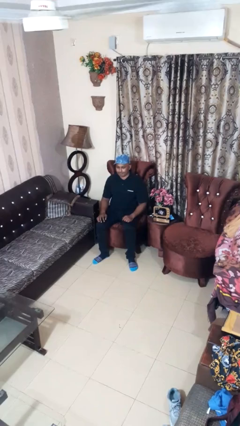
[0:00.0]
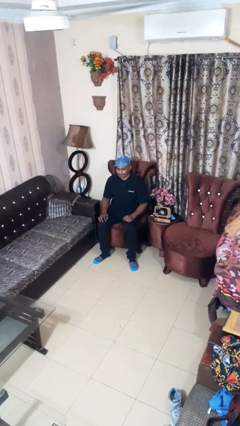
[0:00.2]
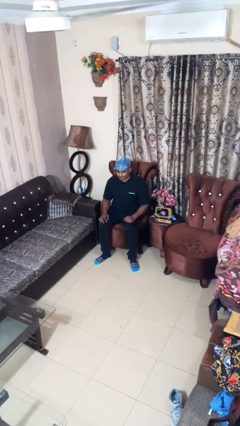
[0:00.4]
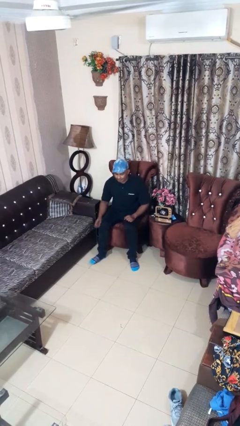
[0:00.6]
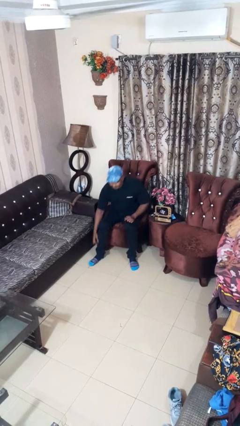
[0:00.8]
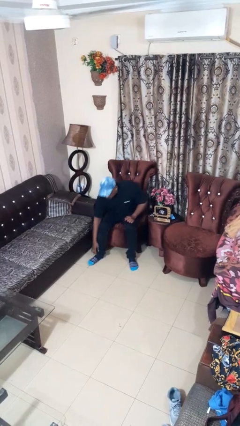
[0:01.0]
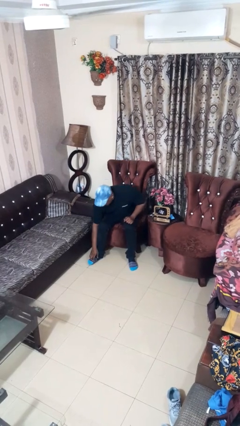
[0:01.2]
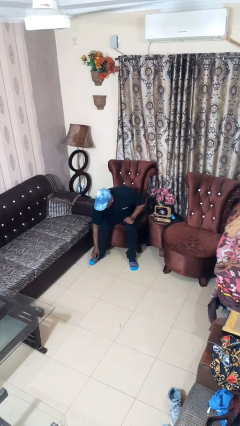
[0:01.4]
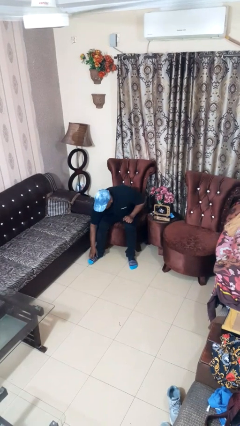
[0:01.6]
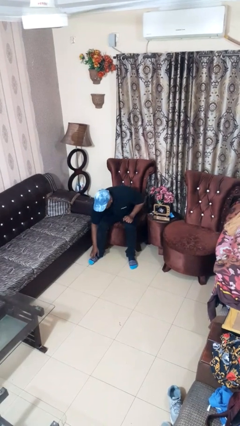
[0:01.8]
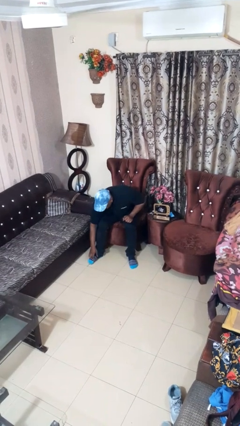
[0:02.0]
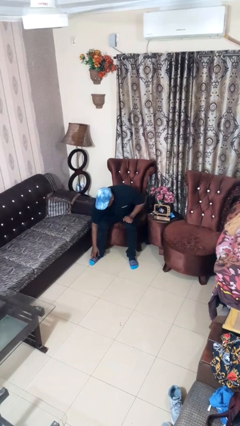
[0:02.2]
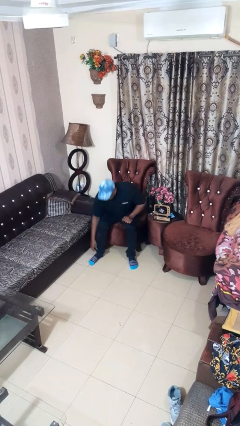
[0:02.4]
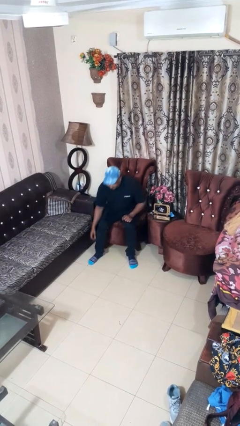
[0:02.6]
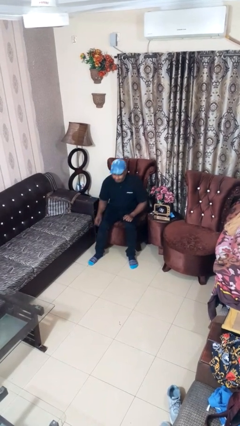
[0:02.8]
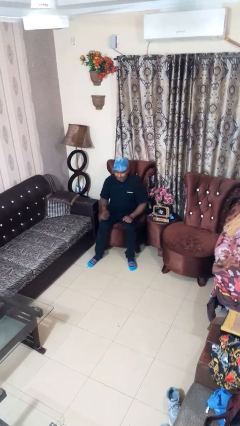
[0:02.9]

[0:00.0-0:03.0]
person rubs foot

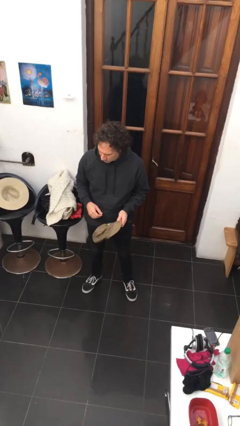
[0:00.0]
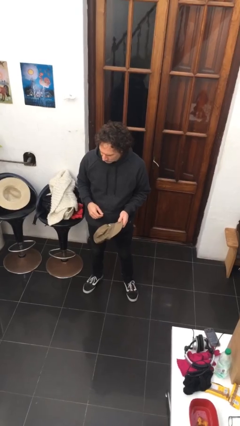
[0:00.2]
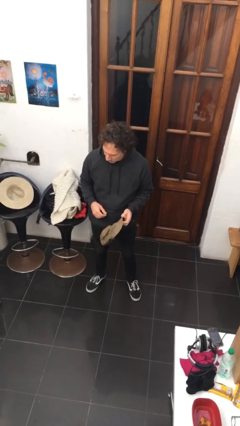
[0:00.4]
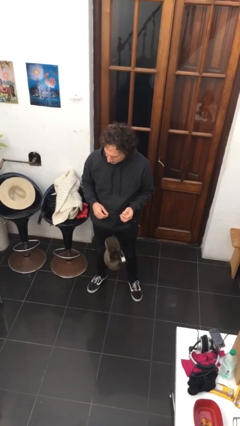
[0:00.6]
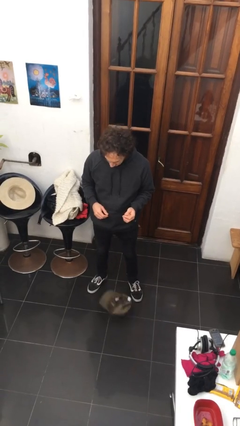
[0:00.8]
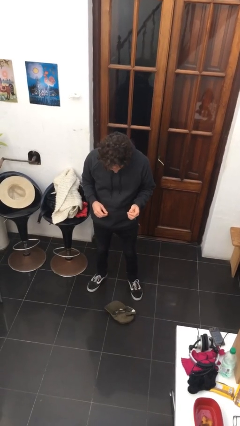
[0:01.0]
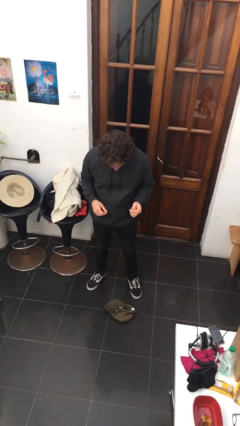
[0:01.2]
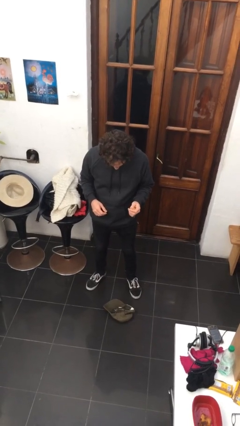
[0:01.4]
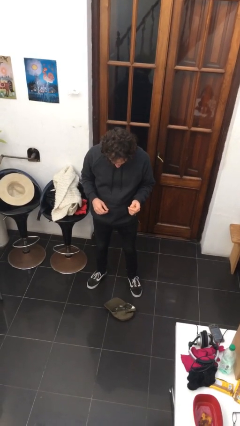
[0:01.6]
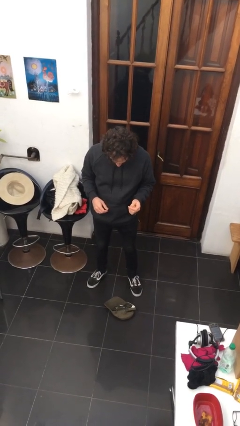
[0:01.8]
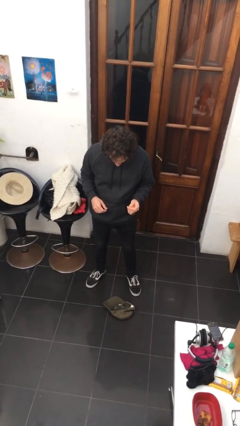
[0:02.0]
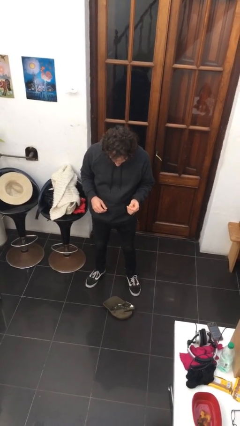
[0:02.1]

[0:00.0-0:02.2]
person drops object

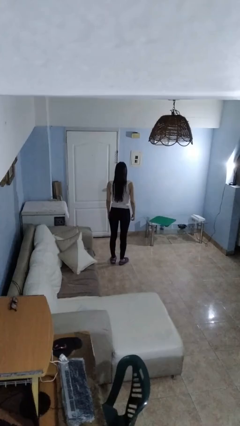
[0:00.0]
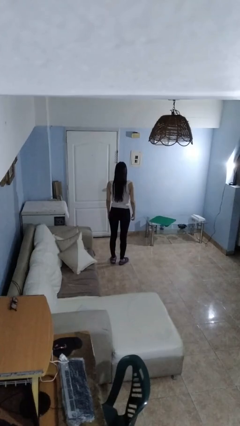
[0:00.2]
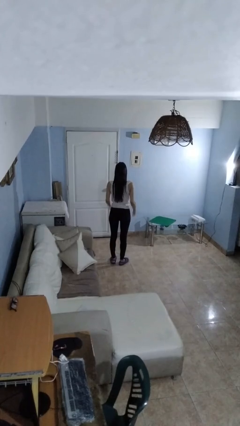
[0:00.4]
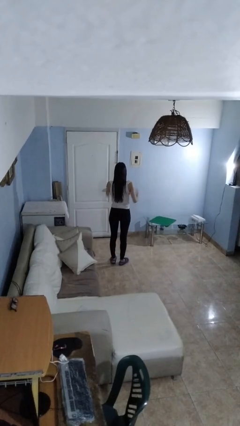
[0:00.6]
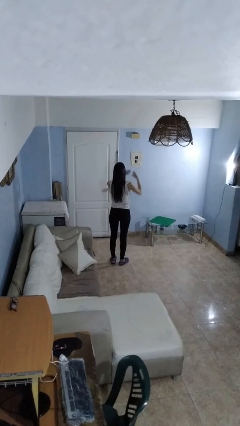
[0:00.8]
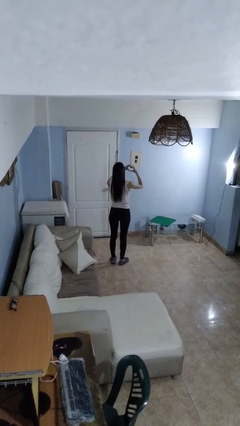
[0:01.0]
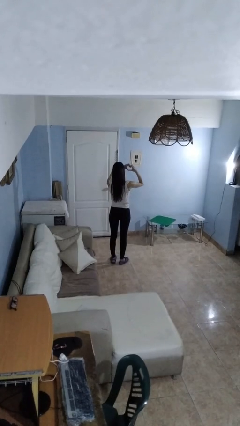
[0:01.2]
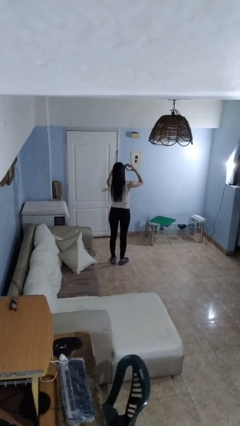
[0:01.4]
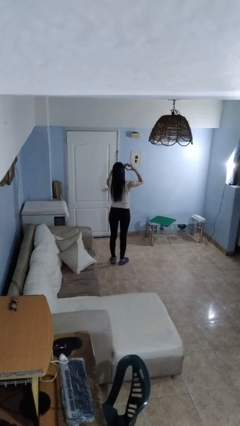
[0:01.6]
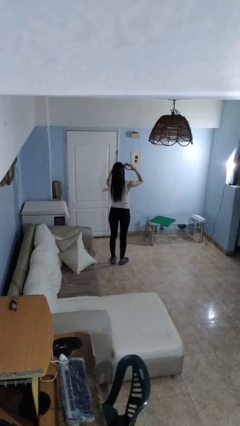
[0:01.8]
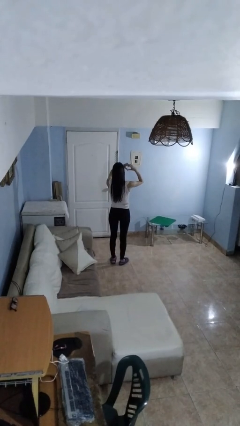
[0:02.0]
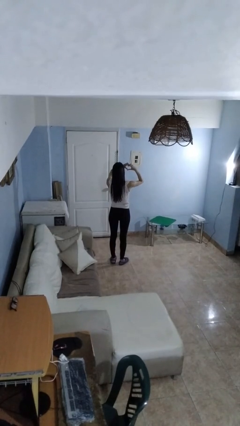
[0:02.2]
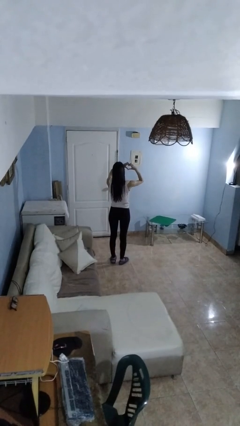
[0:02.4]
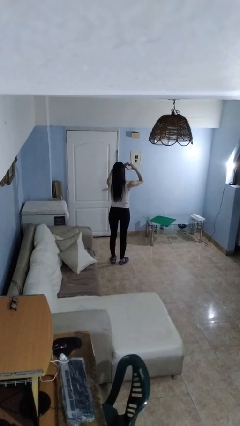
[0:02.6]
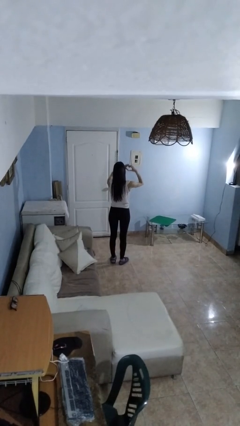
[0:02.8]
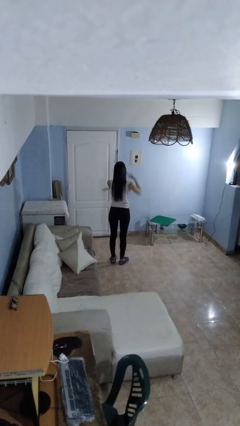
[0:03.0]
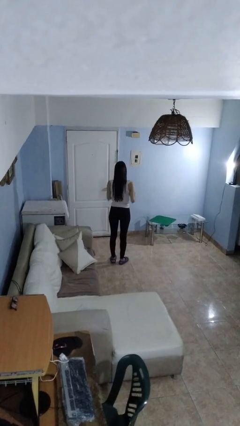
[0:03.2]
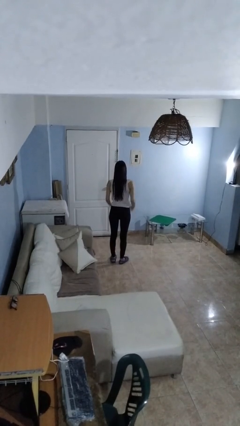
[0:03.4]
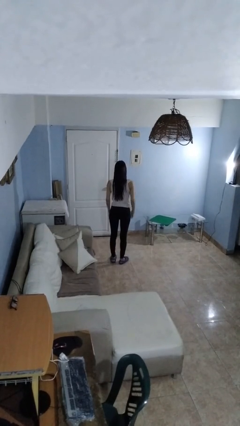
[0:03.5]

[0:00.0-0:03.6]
person gestures heart

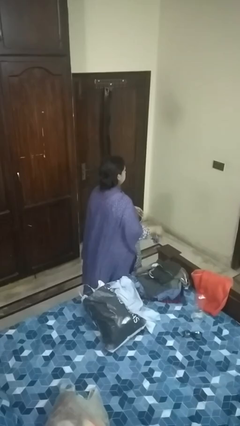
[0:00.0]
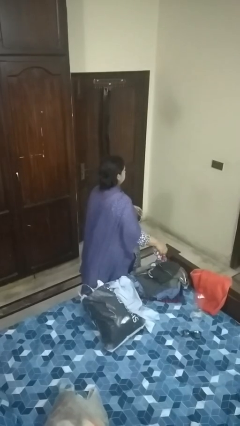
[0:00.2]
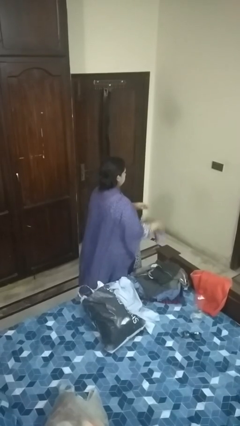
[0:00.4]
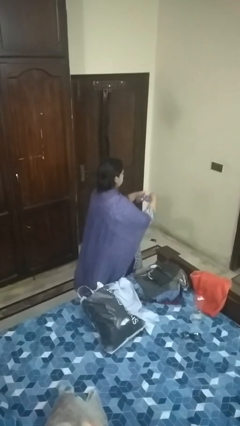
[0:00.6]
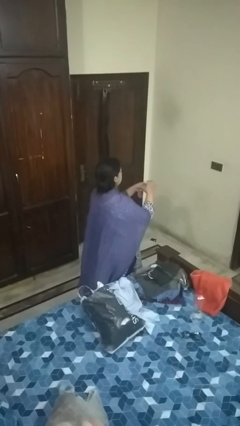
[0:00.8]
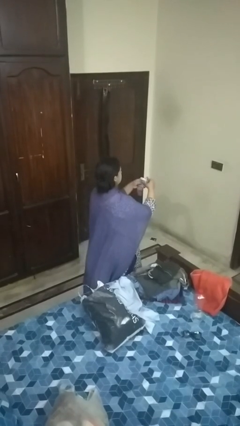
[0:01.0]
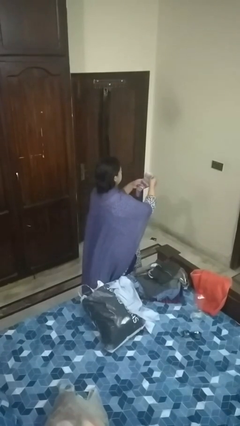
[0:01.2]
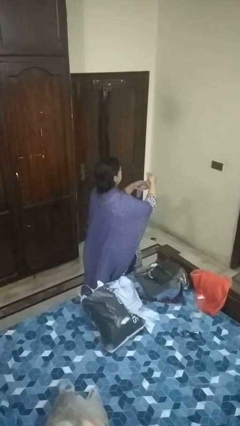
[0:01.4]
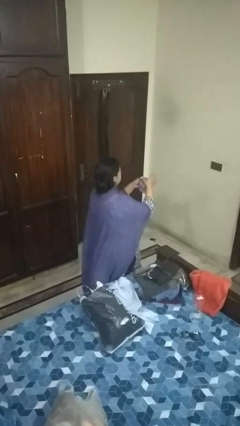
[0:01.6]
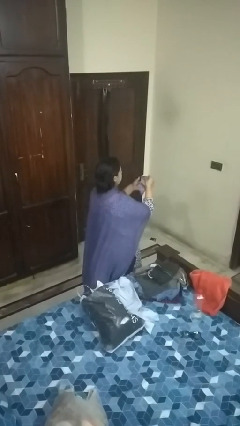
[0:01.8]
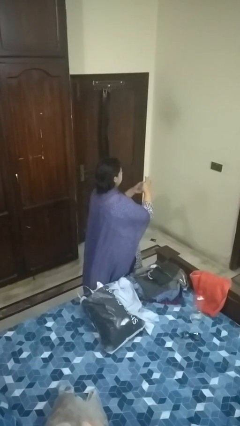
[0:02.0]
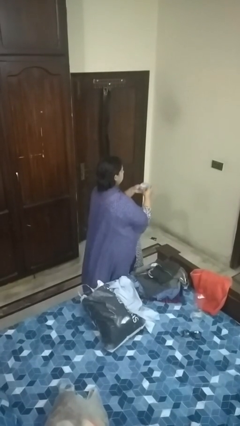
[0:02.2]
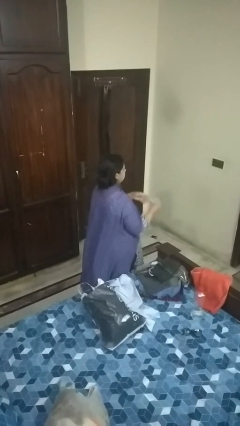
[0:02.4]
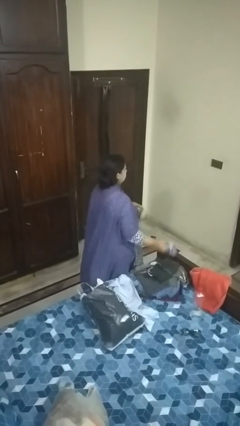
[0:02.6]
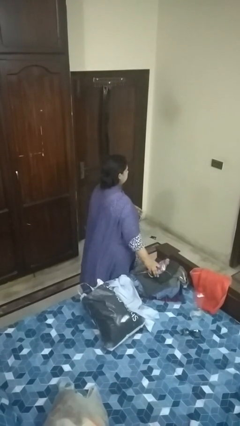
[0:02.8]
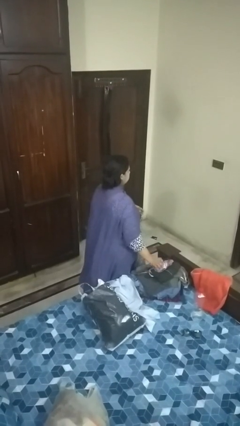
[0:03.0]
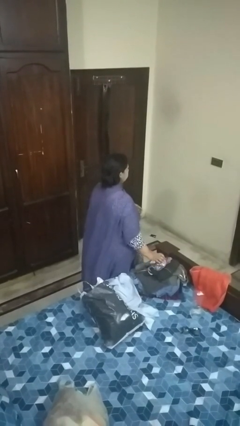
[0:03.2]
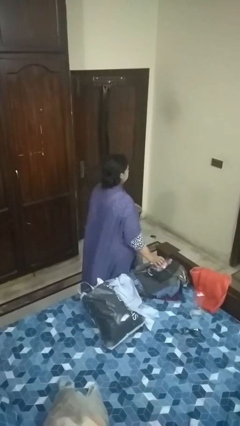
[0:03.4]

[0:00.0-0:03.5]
person folds socks

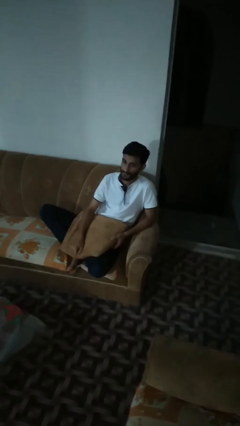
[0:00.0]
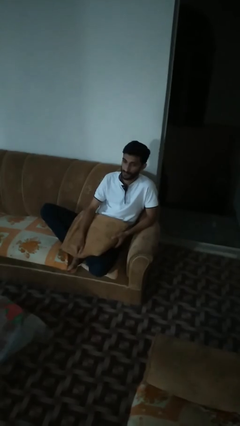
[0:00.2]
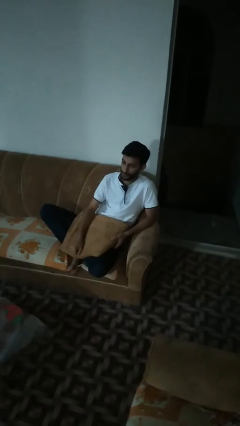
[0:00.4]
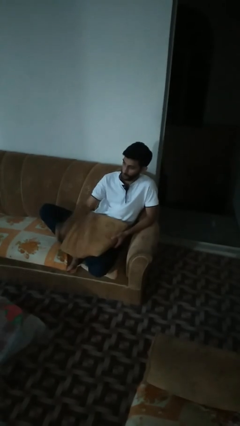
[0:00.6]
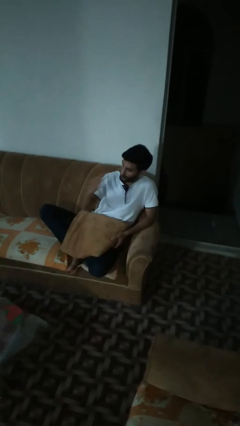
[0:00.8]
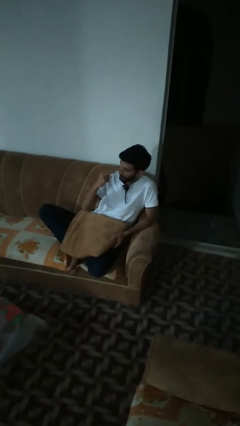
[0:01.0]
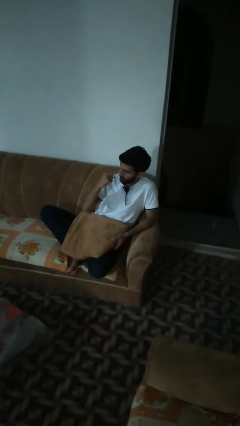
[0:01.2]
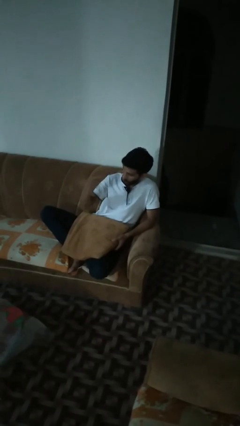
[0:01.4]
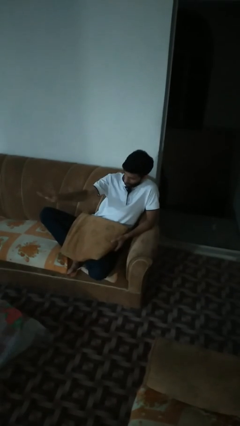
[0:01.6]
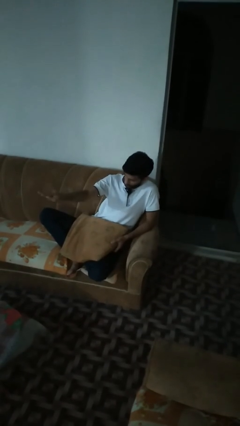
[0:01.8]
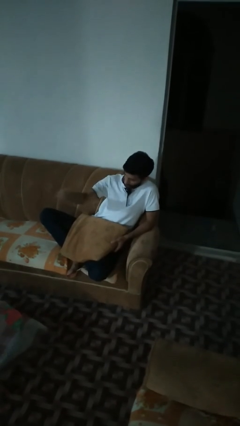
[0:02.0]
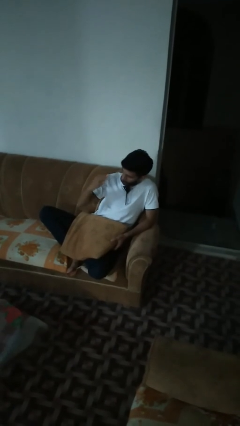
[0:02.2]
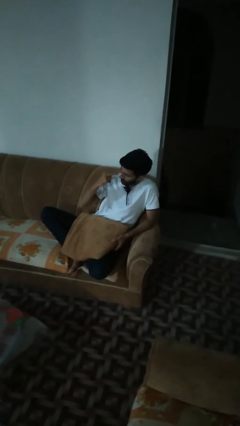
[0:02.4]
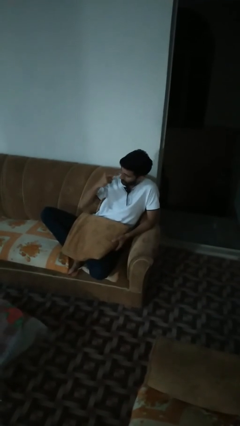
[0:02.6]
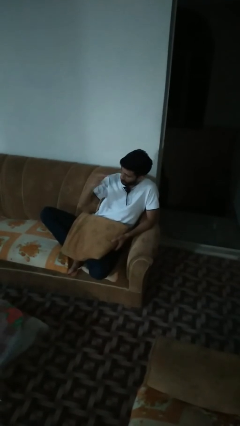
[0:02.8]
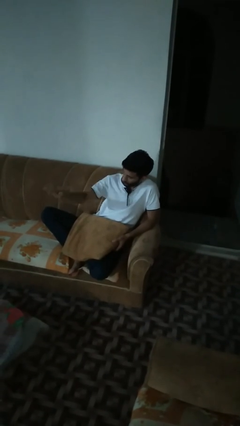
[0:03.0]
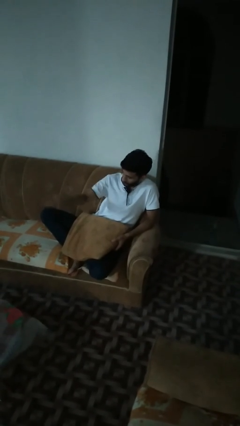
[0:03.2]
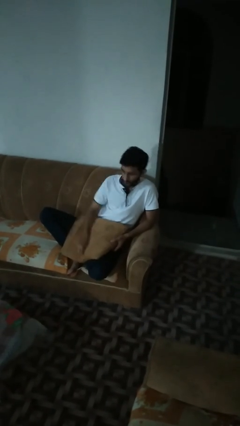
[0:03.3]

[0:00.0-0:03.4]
person gestures watch closely

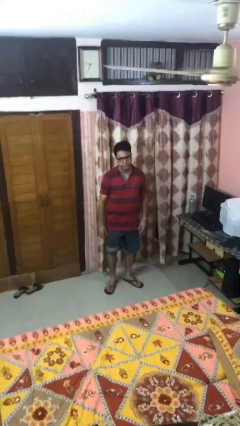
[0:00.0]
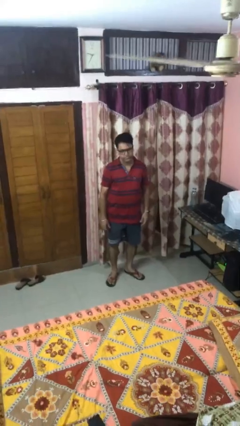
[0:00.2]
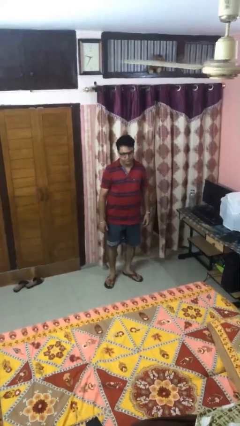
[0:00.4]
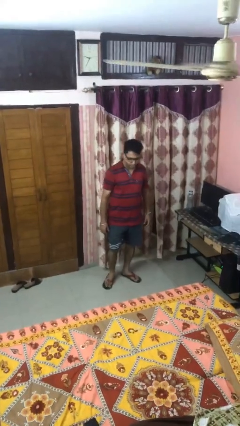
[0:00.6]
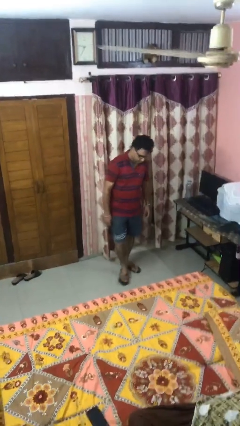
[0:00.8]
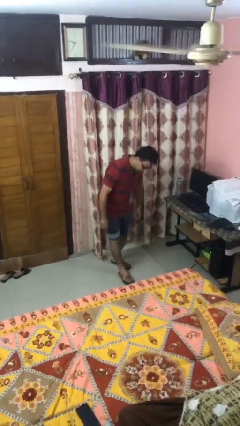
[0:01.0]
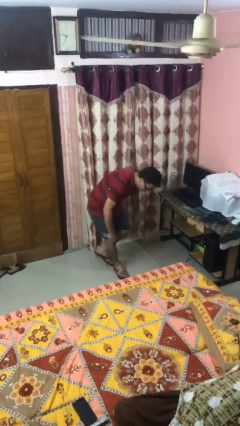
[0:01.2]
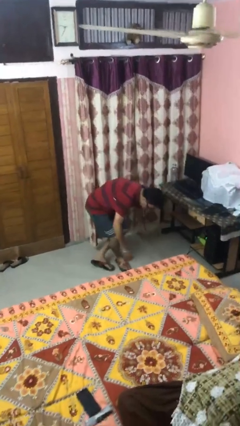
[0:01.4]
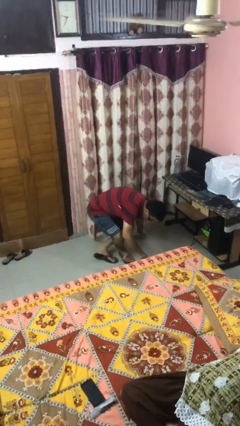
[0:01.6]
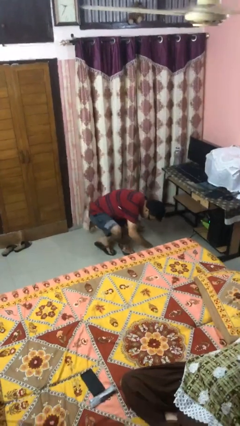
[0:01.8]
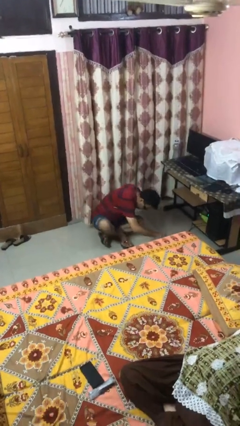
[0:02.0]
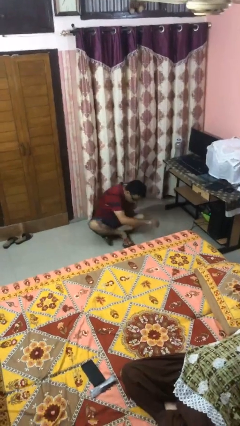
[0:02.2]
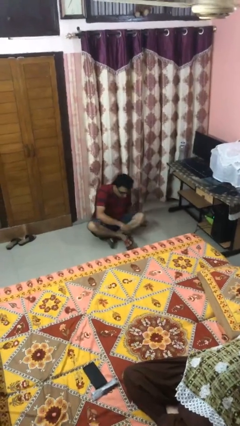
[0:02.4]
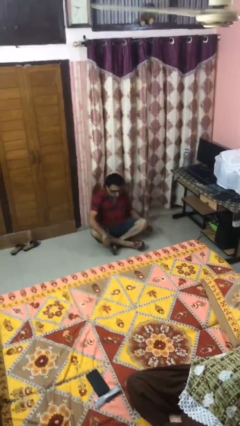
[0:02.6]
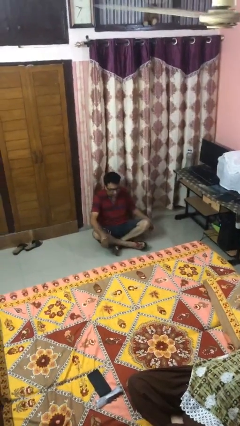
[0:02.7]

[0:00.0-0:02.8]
person sits crisscross
